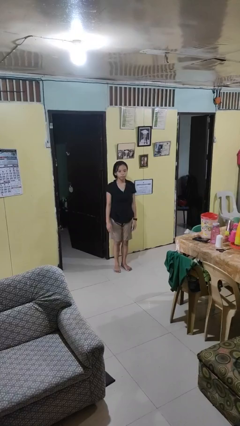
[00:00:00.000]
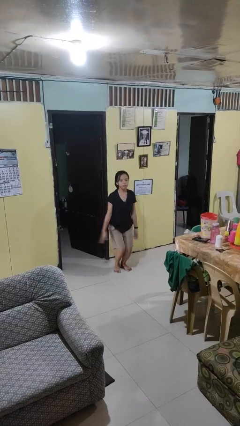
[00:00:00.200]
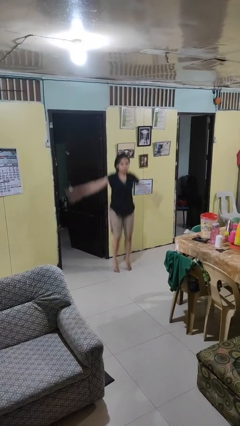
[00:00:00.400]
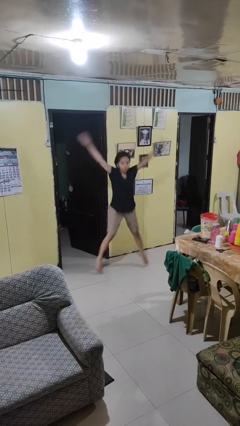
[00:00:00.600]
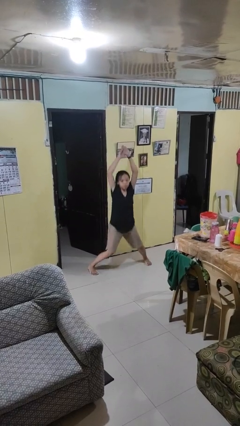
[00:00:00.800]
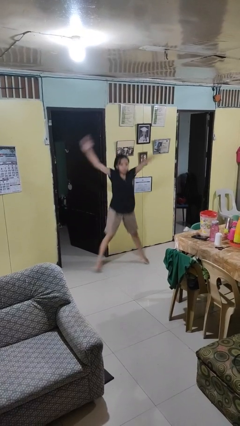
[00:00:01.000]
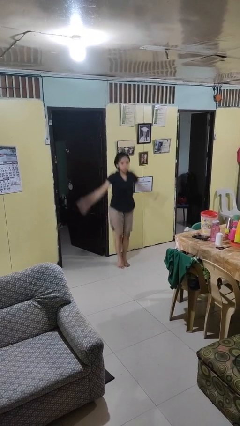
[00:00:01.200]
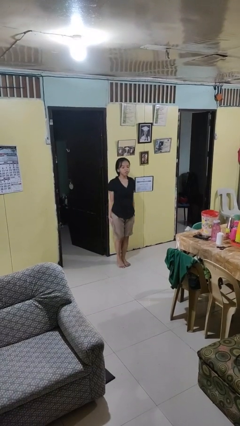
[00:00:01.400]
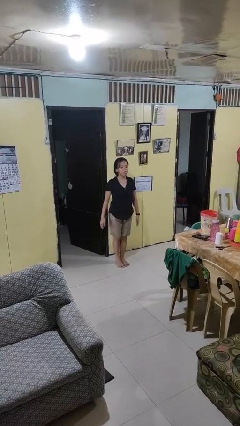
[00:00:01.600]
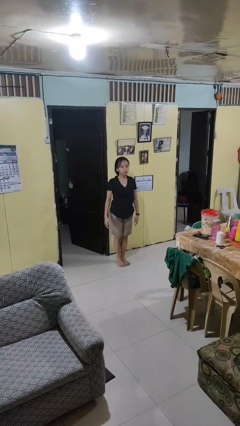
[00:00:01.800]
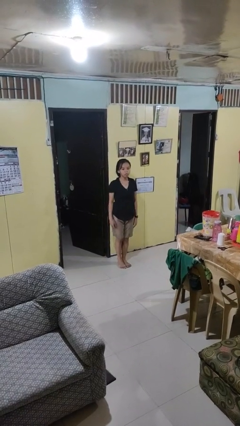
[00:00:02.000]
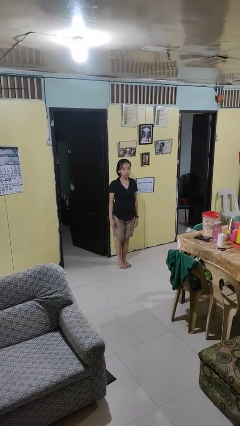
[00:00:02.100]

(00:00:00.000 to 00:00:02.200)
person exercises with jumping jacks

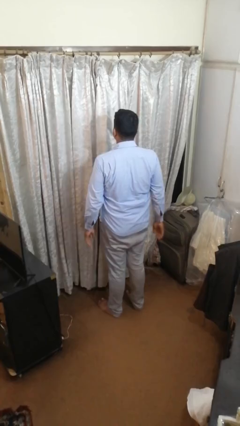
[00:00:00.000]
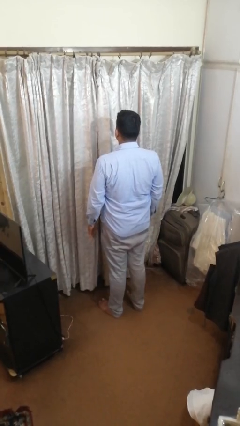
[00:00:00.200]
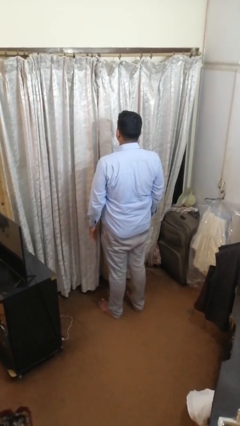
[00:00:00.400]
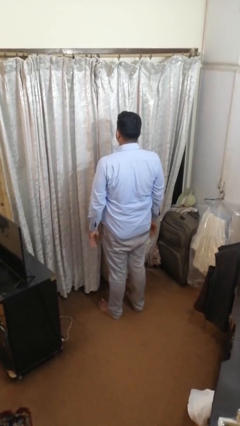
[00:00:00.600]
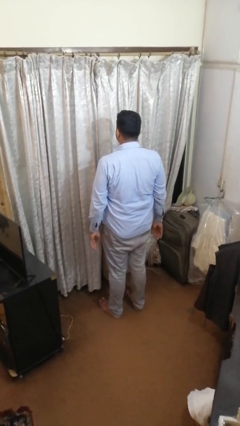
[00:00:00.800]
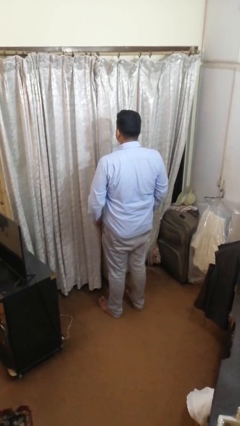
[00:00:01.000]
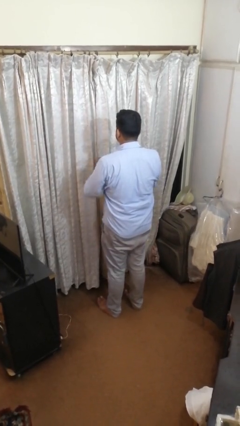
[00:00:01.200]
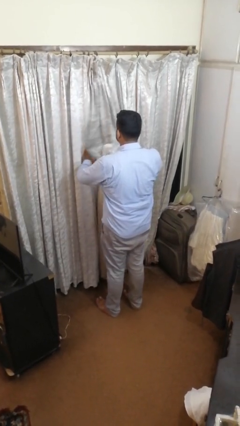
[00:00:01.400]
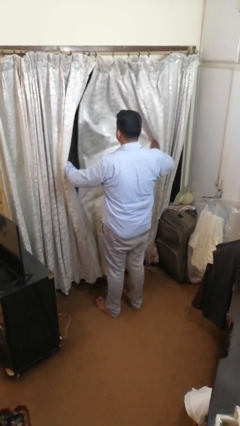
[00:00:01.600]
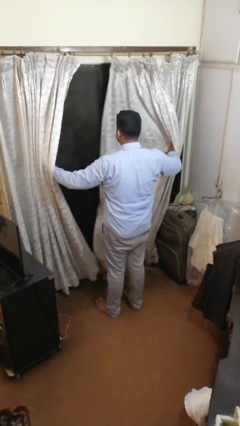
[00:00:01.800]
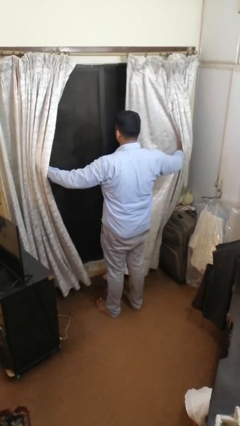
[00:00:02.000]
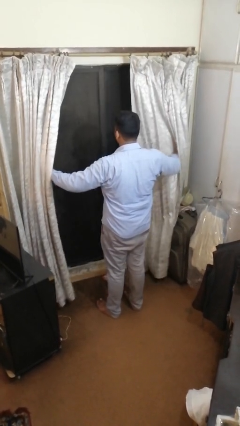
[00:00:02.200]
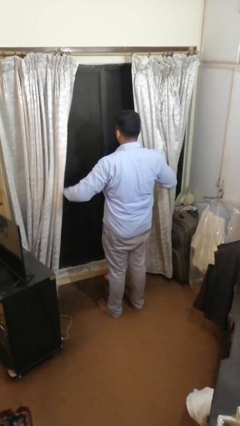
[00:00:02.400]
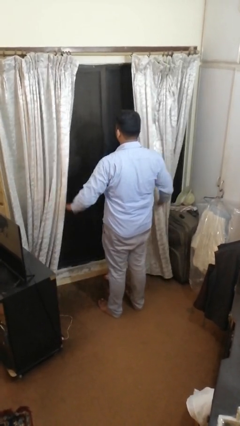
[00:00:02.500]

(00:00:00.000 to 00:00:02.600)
person opens curtains

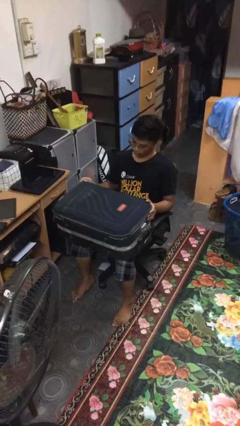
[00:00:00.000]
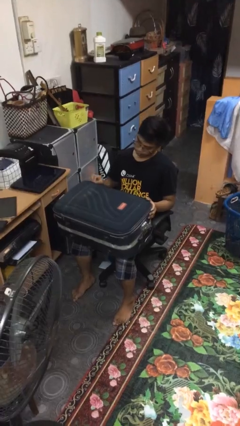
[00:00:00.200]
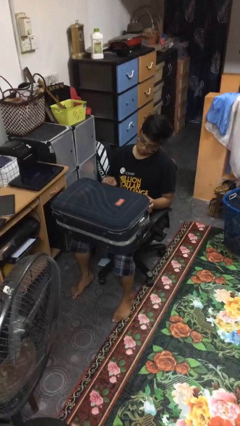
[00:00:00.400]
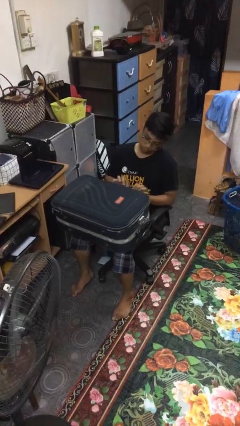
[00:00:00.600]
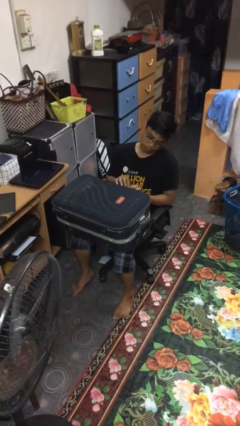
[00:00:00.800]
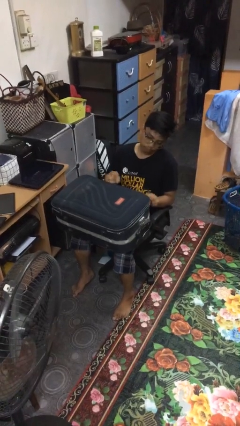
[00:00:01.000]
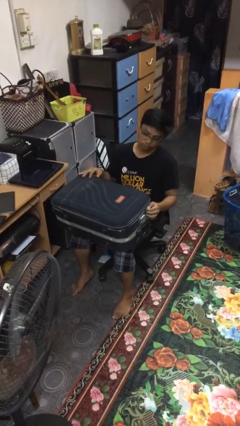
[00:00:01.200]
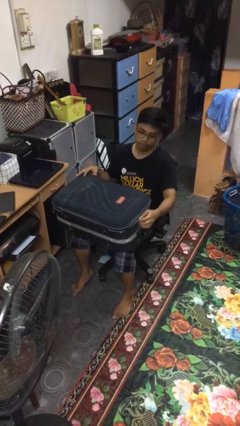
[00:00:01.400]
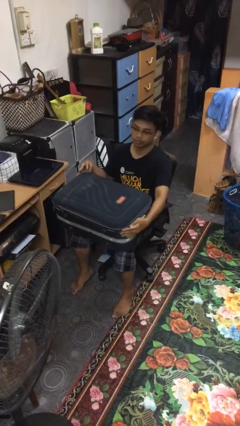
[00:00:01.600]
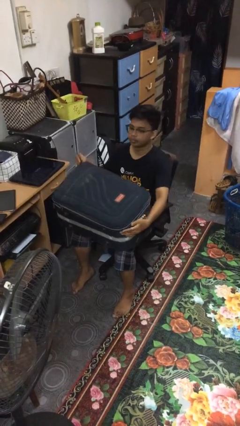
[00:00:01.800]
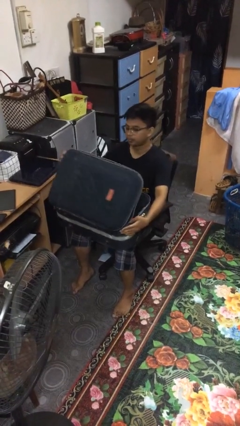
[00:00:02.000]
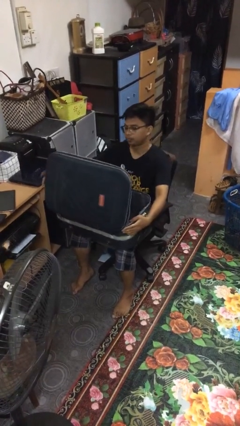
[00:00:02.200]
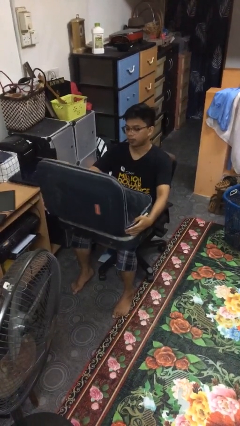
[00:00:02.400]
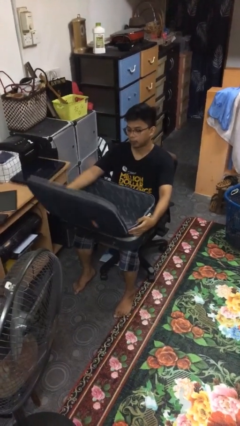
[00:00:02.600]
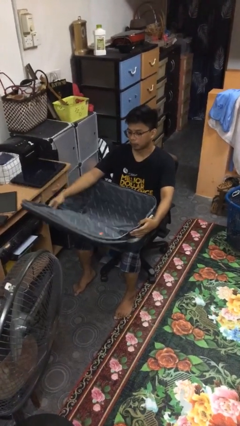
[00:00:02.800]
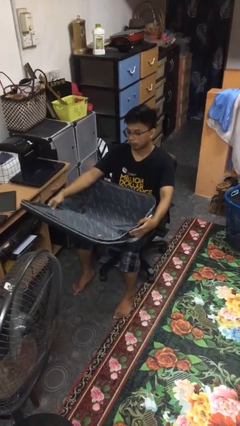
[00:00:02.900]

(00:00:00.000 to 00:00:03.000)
person opens suitcase

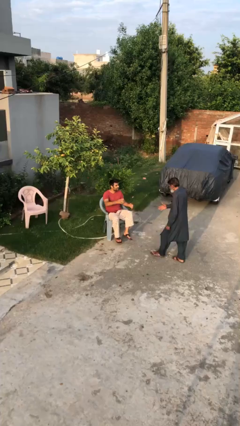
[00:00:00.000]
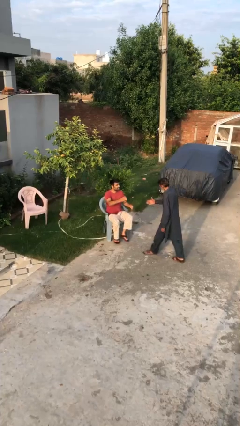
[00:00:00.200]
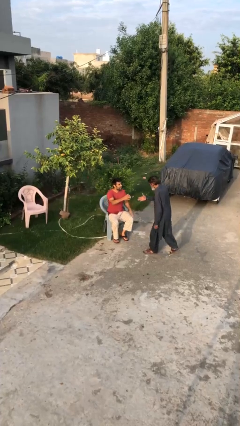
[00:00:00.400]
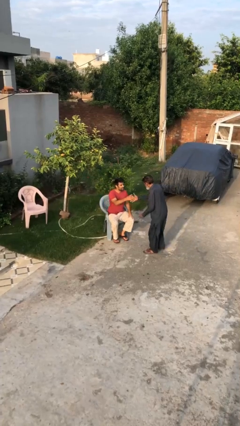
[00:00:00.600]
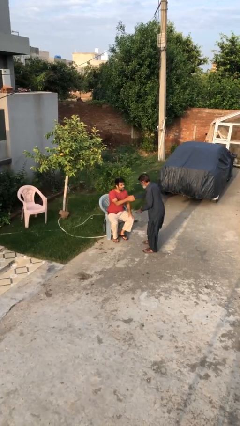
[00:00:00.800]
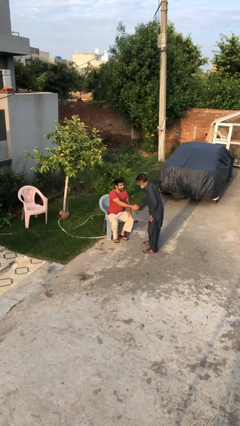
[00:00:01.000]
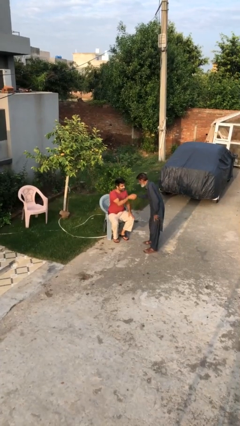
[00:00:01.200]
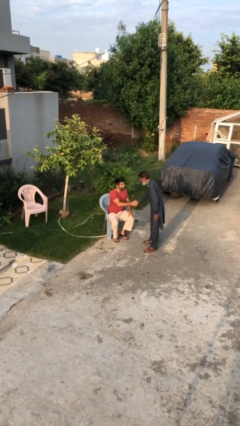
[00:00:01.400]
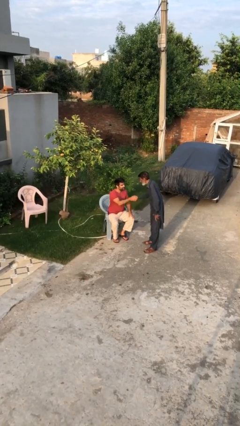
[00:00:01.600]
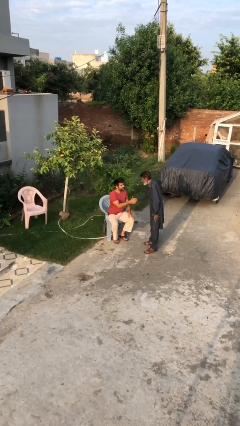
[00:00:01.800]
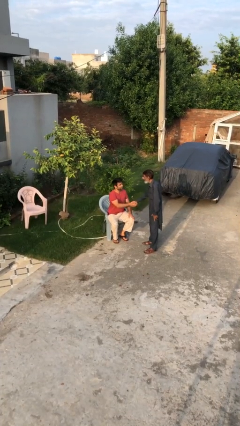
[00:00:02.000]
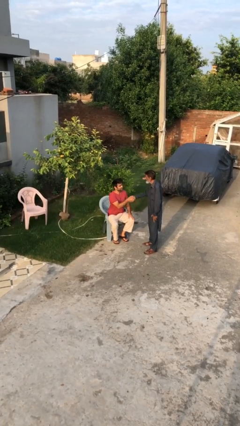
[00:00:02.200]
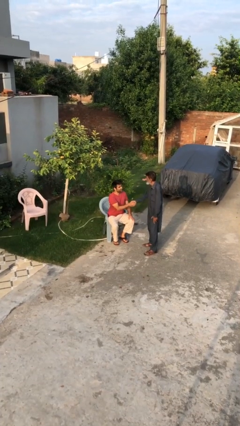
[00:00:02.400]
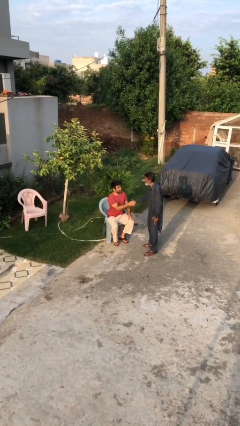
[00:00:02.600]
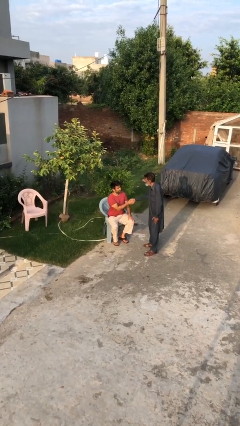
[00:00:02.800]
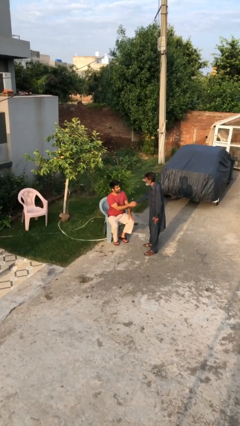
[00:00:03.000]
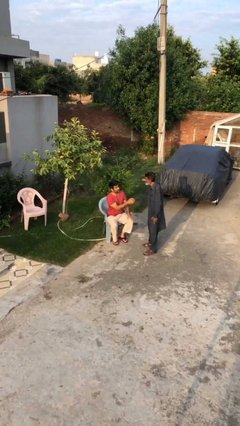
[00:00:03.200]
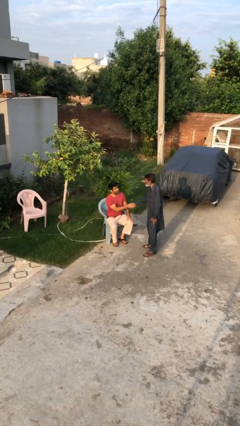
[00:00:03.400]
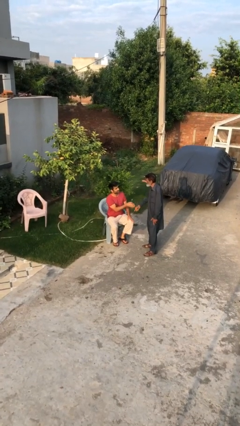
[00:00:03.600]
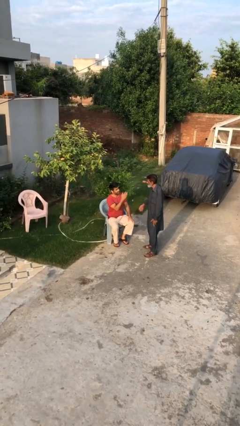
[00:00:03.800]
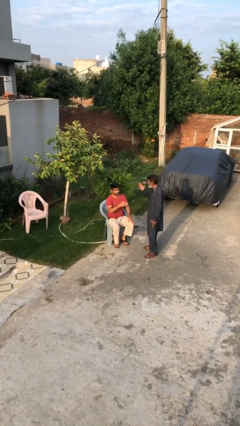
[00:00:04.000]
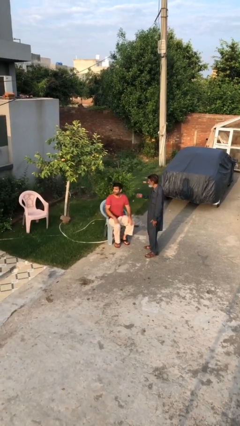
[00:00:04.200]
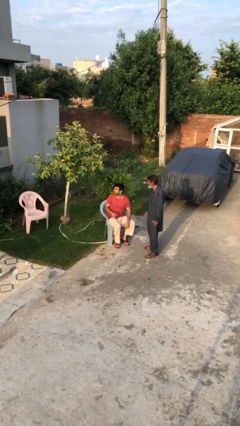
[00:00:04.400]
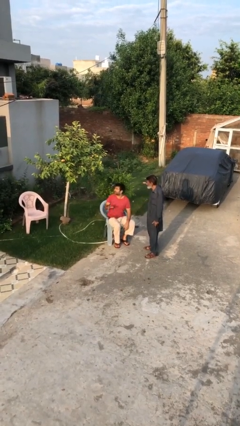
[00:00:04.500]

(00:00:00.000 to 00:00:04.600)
person shakes hand

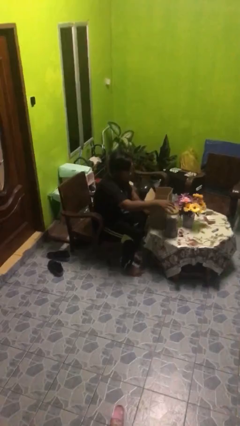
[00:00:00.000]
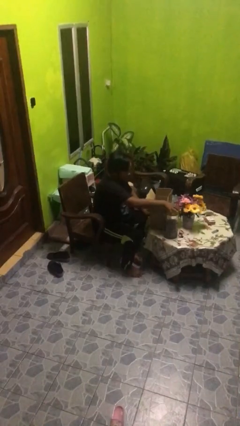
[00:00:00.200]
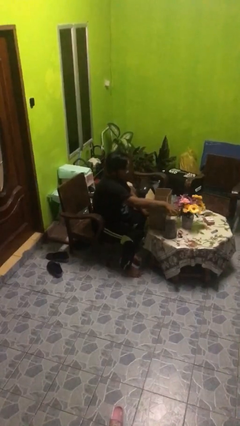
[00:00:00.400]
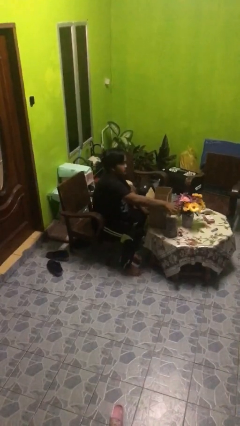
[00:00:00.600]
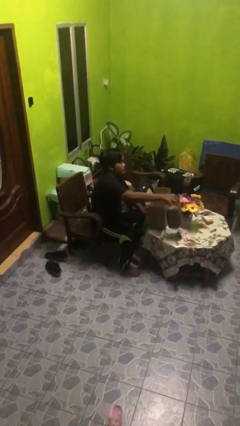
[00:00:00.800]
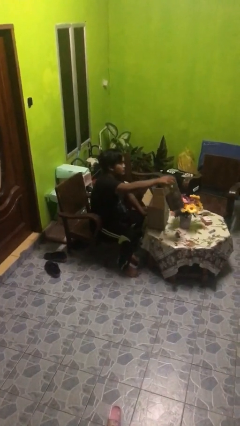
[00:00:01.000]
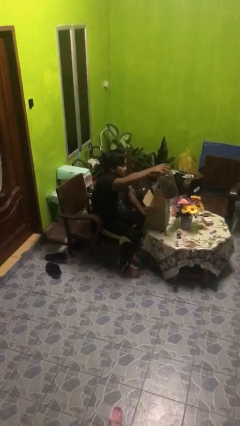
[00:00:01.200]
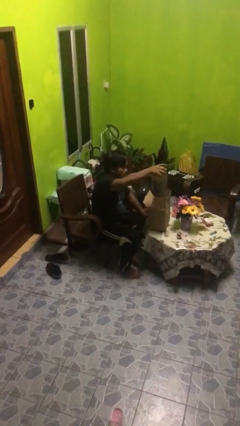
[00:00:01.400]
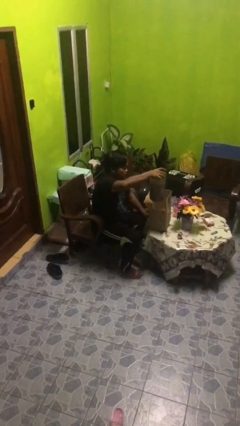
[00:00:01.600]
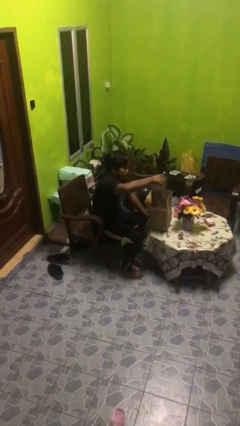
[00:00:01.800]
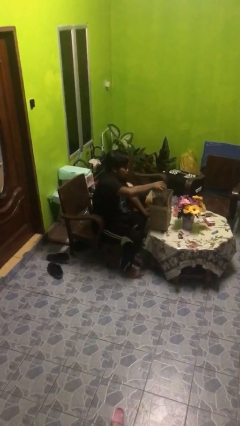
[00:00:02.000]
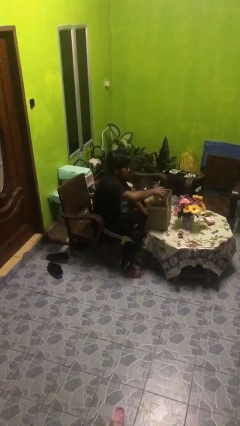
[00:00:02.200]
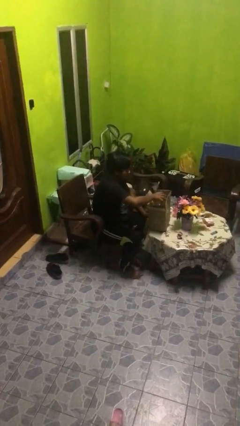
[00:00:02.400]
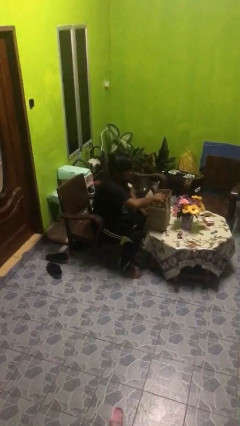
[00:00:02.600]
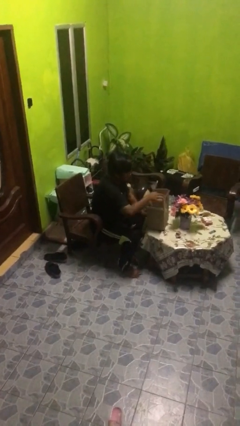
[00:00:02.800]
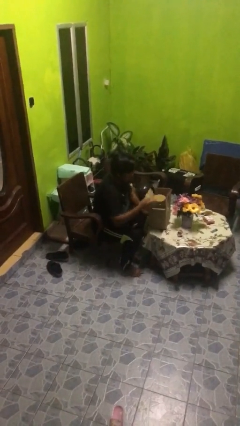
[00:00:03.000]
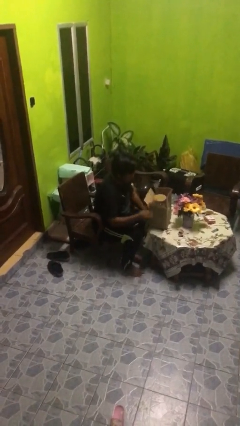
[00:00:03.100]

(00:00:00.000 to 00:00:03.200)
person puts object into box

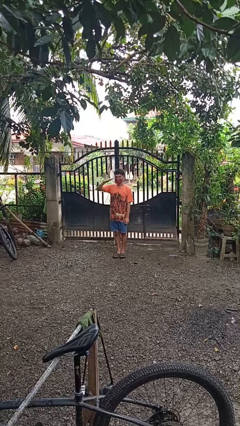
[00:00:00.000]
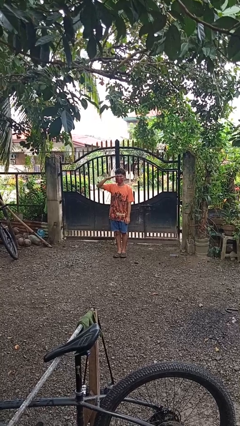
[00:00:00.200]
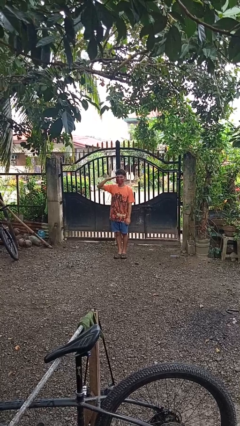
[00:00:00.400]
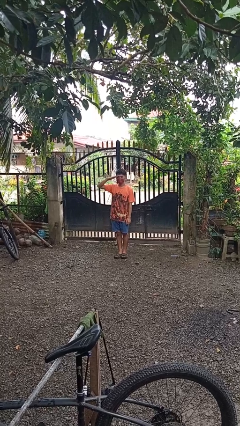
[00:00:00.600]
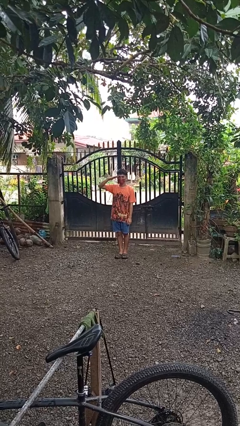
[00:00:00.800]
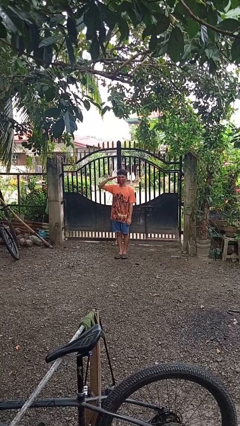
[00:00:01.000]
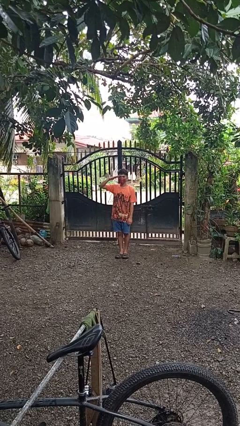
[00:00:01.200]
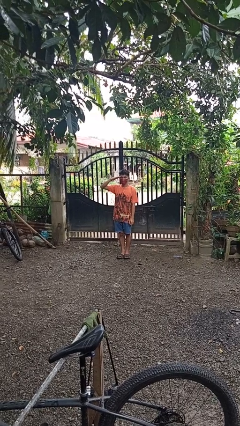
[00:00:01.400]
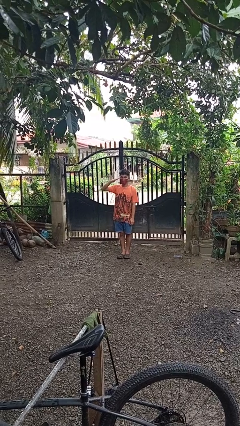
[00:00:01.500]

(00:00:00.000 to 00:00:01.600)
person salutes
